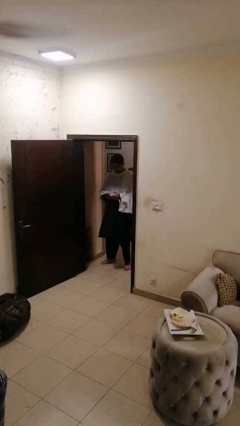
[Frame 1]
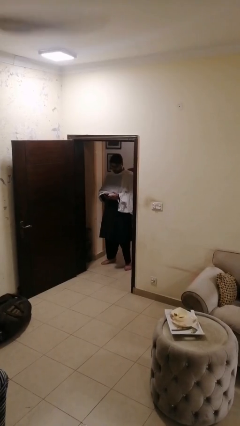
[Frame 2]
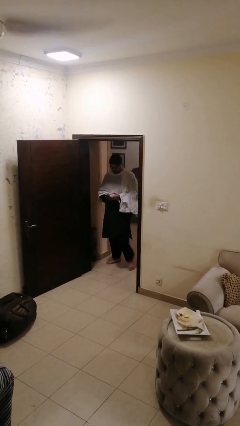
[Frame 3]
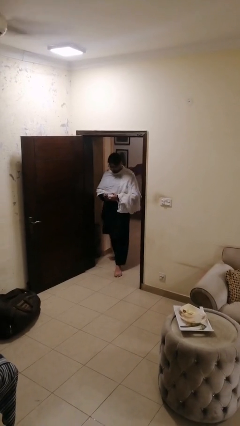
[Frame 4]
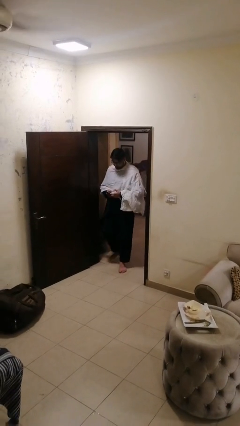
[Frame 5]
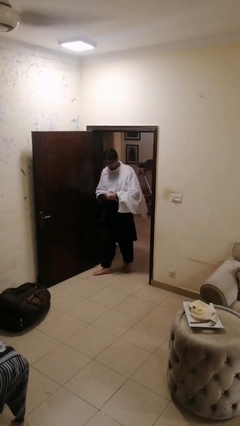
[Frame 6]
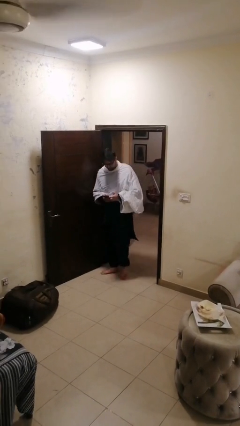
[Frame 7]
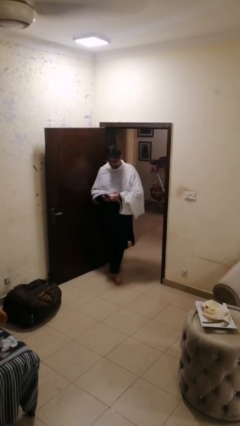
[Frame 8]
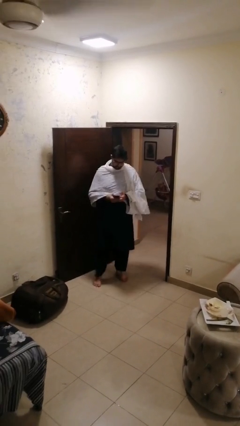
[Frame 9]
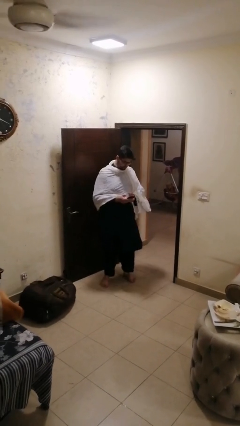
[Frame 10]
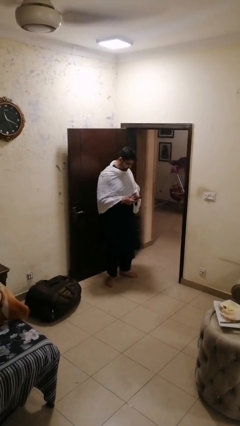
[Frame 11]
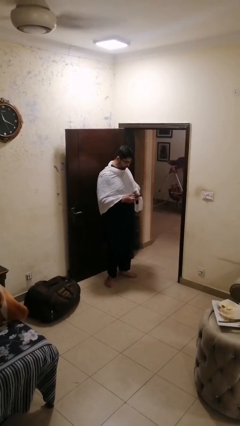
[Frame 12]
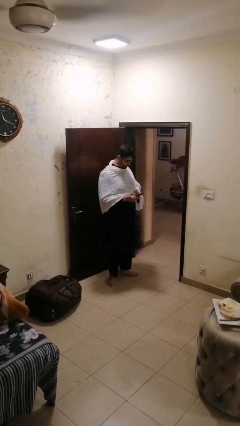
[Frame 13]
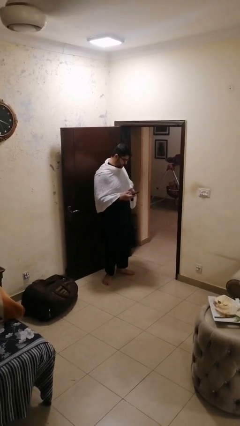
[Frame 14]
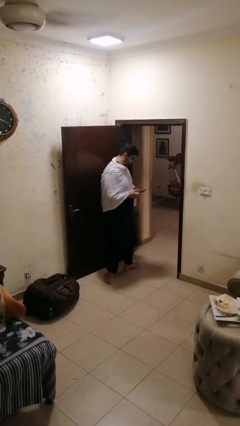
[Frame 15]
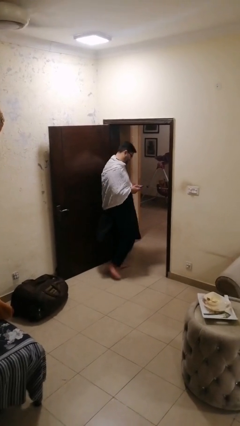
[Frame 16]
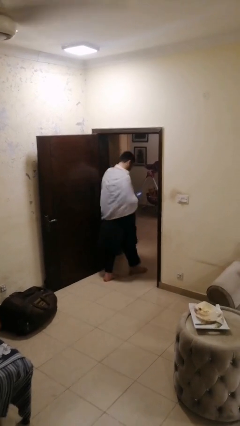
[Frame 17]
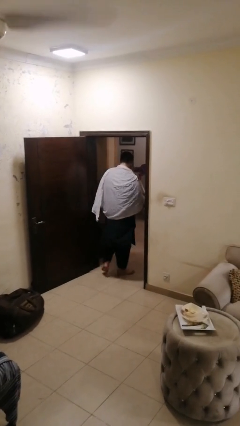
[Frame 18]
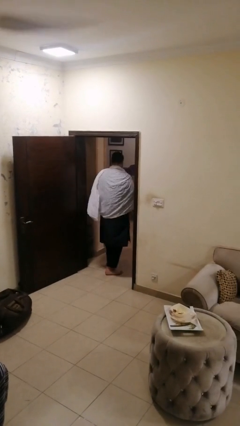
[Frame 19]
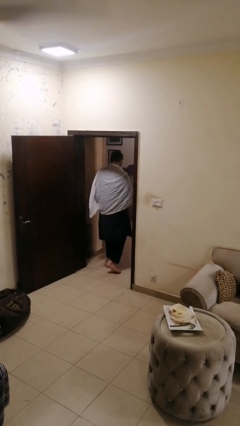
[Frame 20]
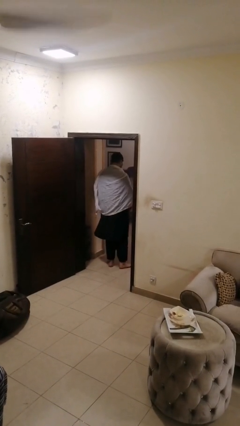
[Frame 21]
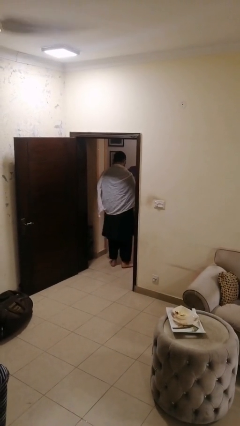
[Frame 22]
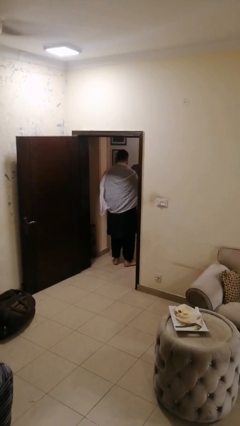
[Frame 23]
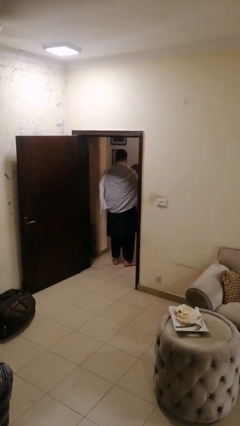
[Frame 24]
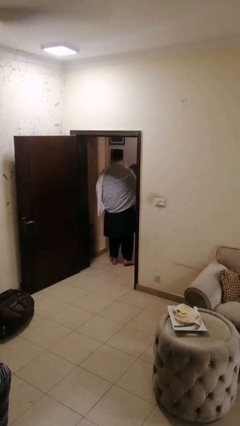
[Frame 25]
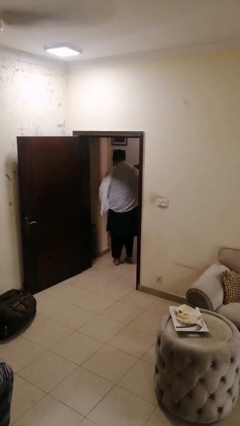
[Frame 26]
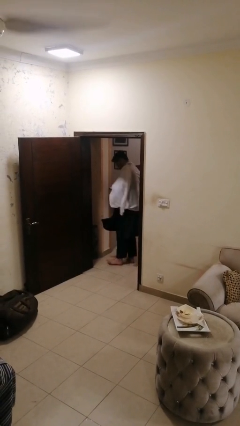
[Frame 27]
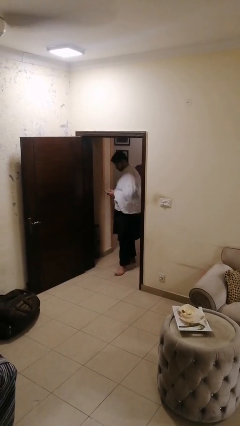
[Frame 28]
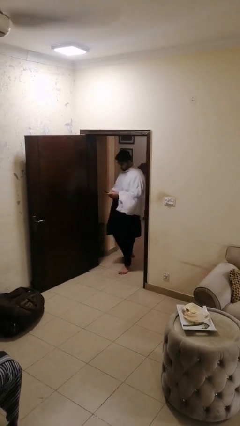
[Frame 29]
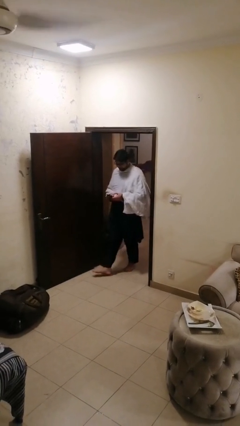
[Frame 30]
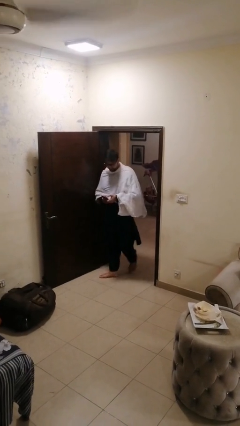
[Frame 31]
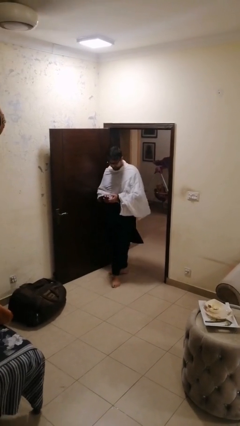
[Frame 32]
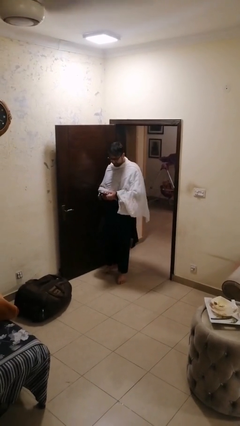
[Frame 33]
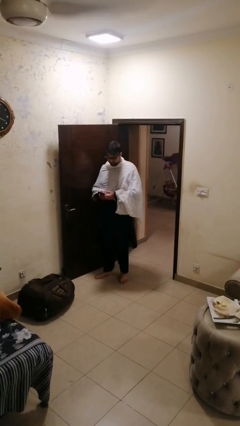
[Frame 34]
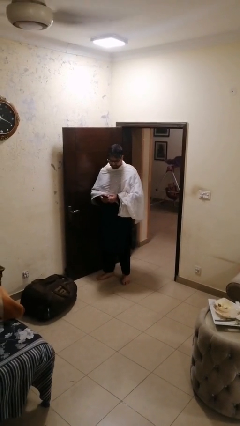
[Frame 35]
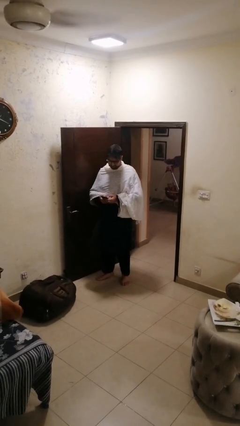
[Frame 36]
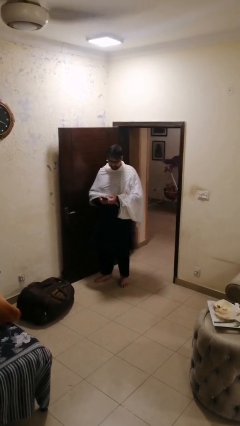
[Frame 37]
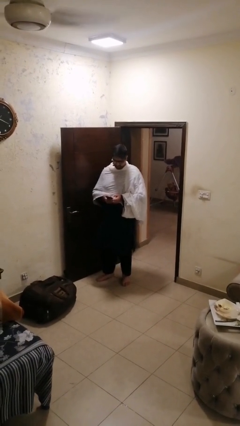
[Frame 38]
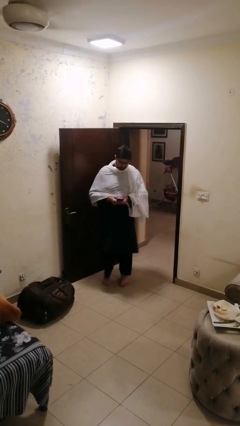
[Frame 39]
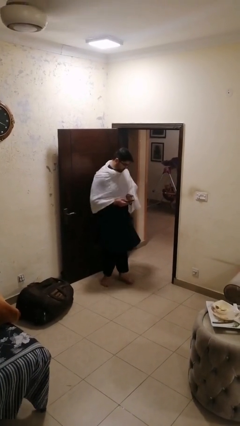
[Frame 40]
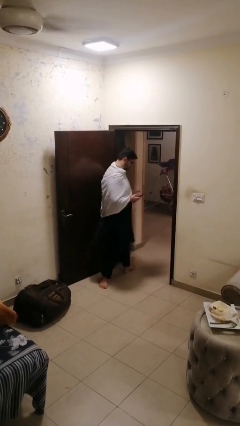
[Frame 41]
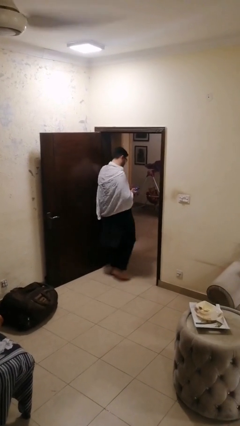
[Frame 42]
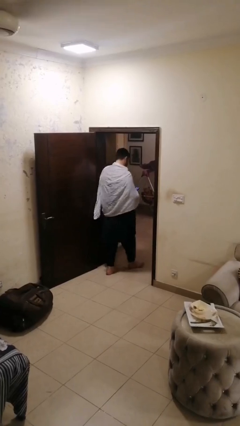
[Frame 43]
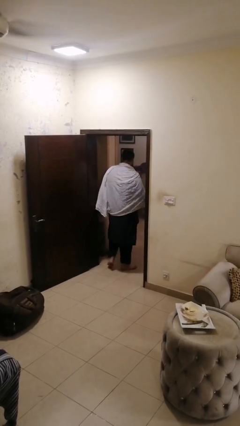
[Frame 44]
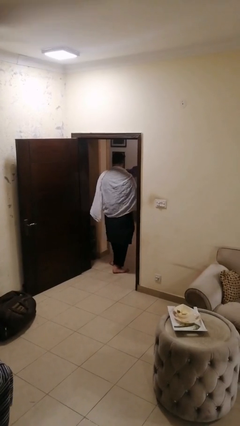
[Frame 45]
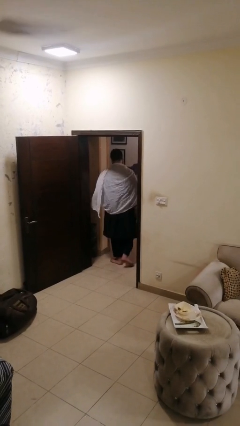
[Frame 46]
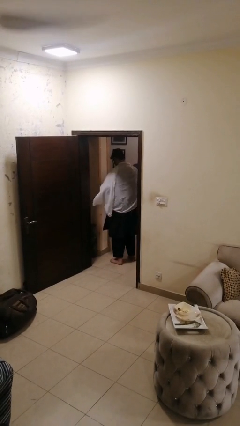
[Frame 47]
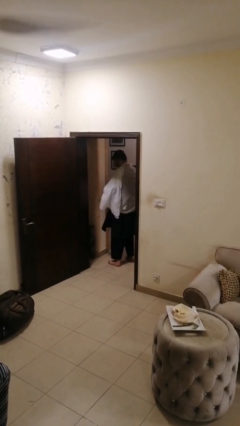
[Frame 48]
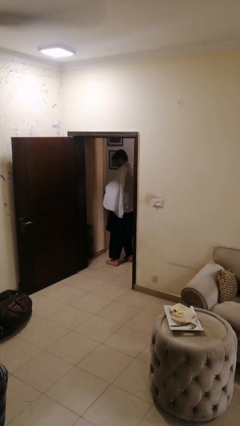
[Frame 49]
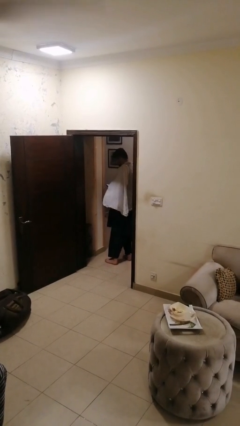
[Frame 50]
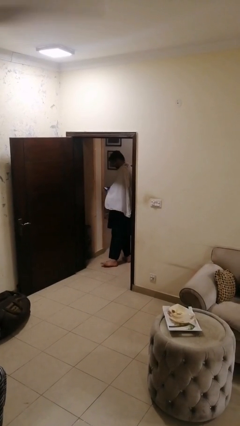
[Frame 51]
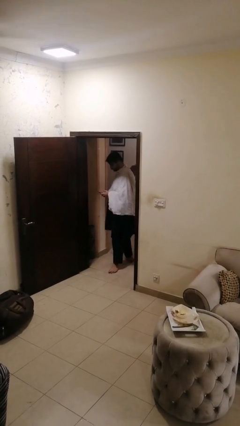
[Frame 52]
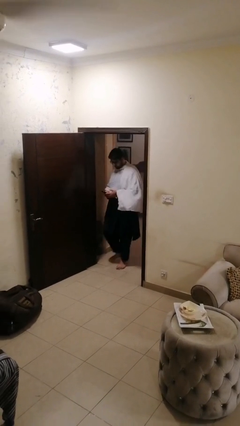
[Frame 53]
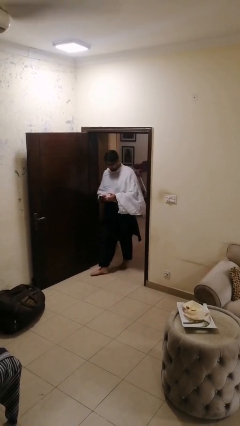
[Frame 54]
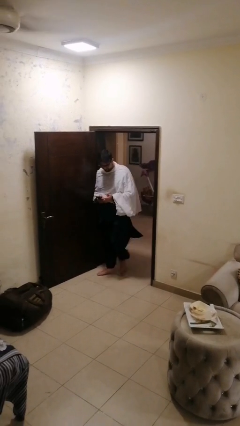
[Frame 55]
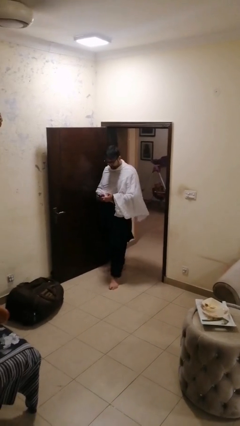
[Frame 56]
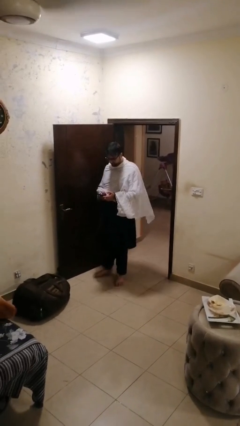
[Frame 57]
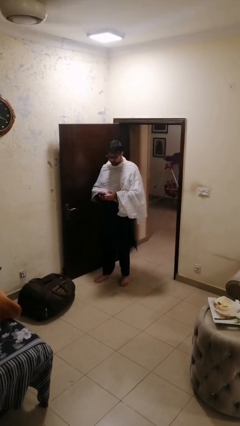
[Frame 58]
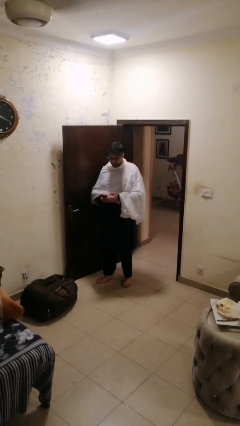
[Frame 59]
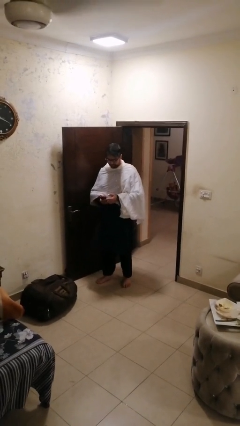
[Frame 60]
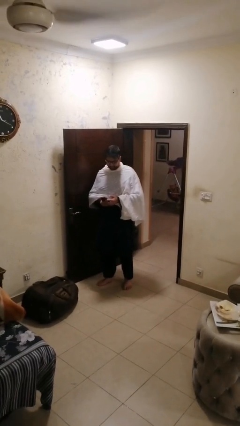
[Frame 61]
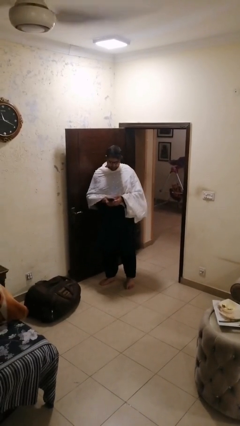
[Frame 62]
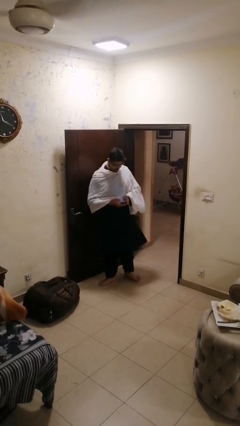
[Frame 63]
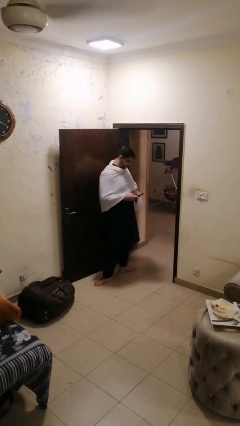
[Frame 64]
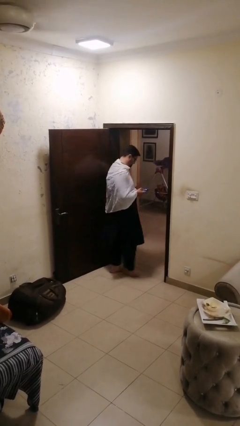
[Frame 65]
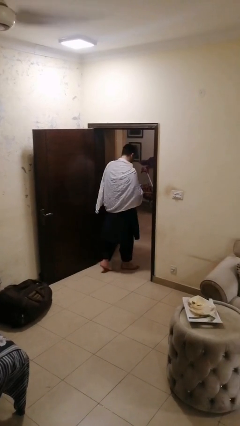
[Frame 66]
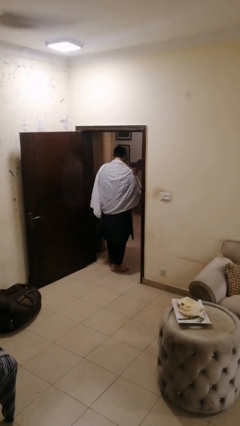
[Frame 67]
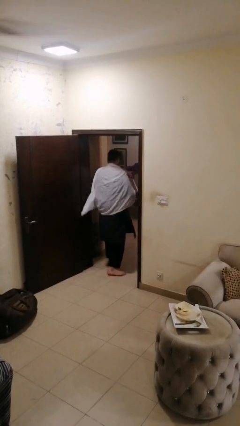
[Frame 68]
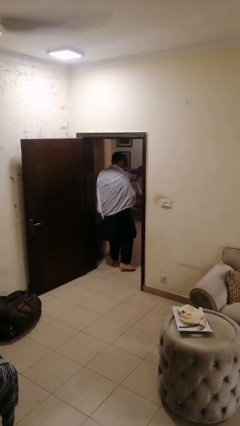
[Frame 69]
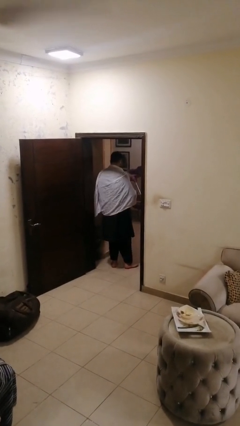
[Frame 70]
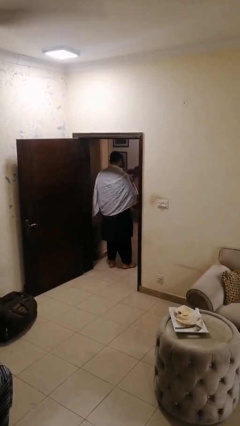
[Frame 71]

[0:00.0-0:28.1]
person texts on phone

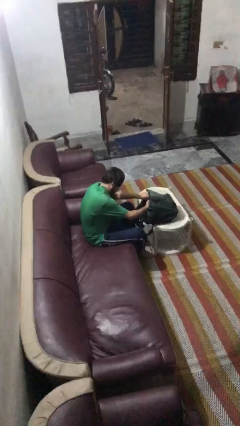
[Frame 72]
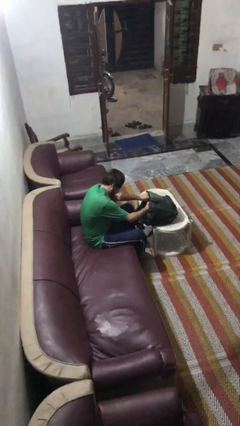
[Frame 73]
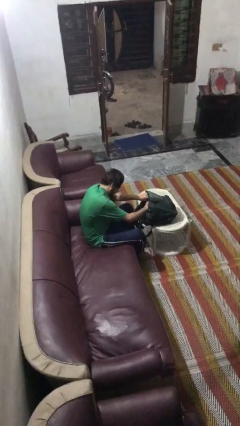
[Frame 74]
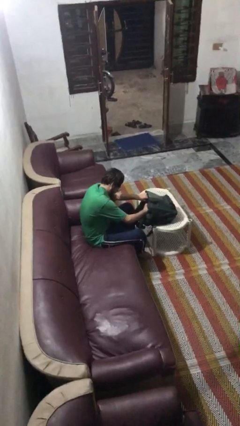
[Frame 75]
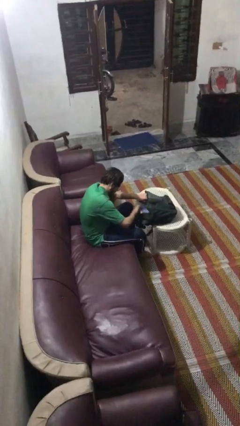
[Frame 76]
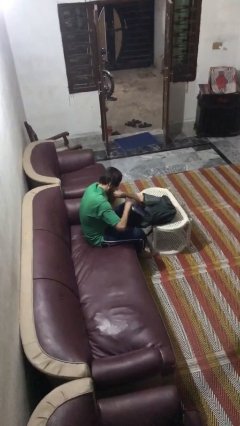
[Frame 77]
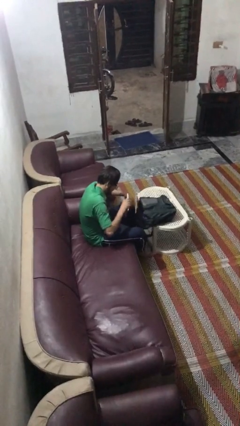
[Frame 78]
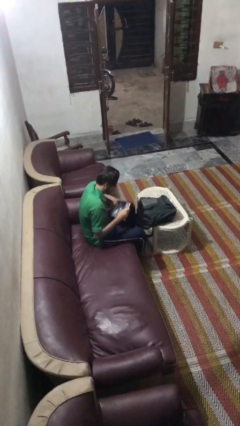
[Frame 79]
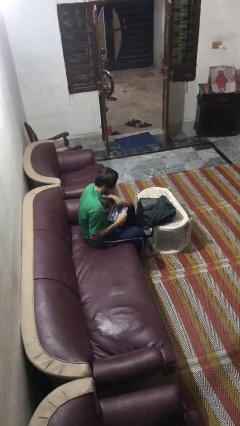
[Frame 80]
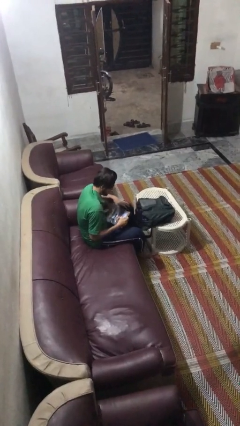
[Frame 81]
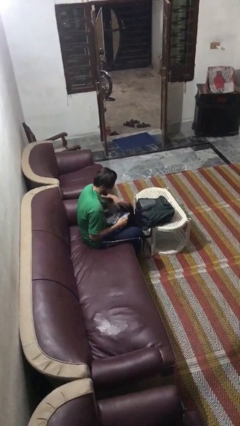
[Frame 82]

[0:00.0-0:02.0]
person takes object from backpack

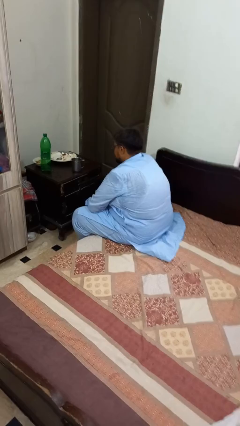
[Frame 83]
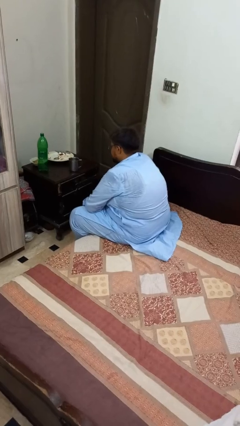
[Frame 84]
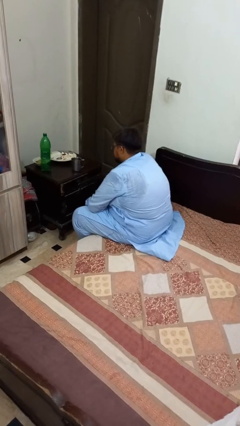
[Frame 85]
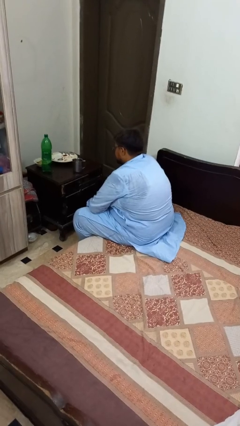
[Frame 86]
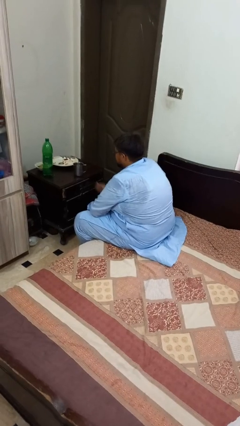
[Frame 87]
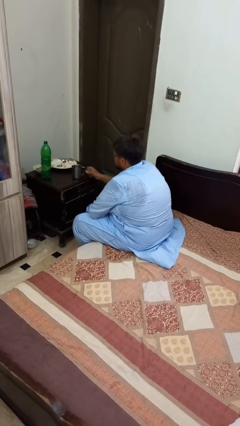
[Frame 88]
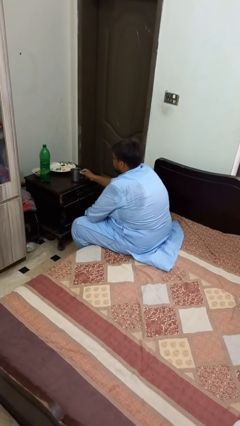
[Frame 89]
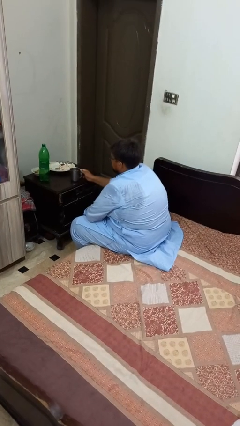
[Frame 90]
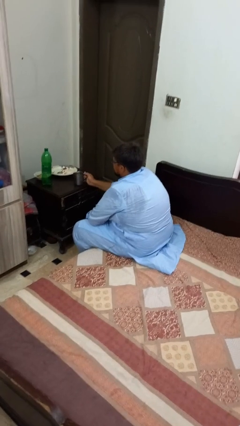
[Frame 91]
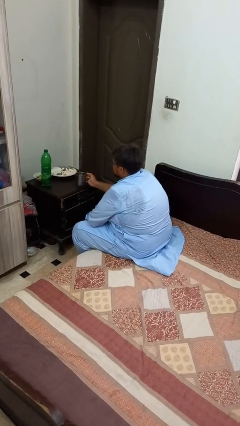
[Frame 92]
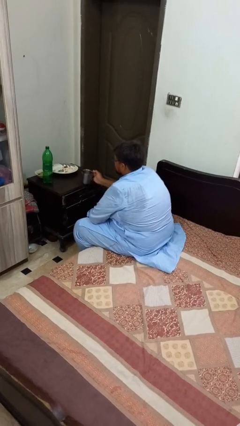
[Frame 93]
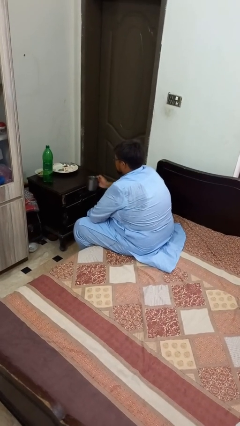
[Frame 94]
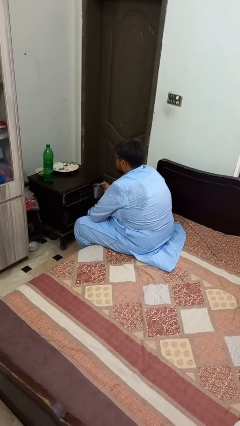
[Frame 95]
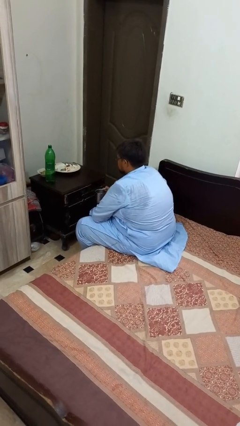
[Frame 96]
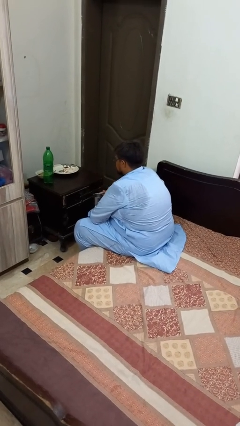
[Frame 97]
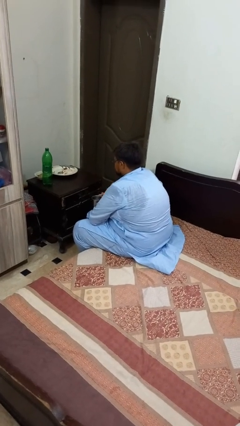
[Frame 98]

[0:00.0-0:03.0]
person picks up object from table
